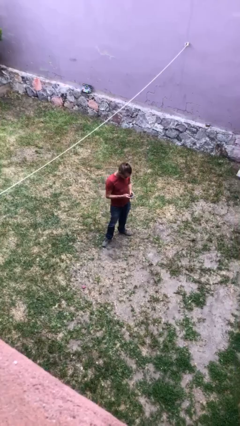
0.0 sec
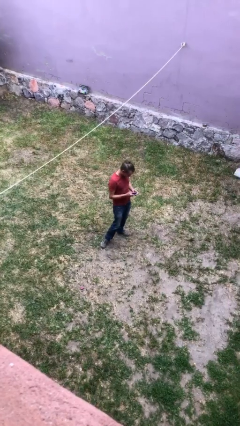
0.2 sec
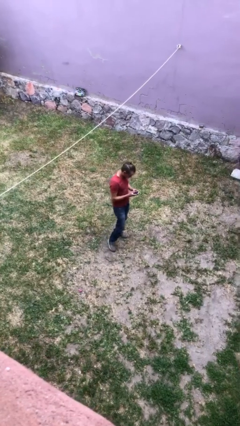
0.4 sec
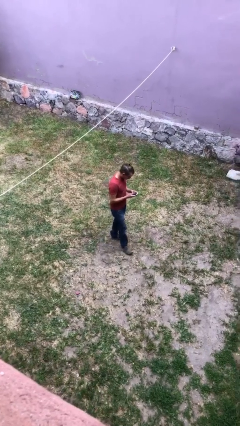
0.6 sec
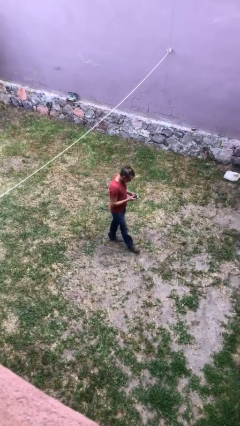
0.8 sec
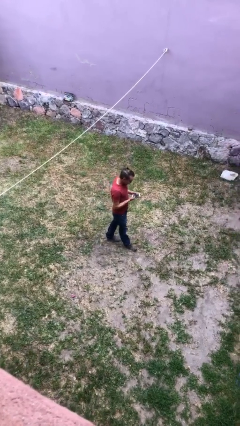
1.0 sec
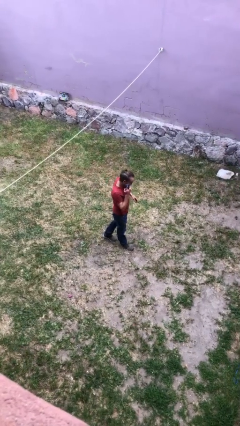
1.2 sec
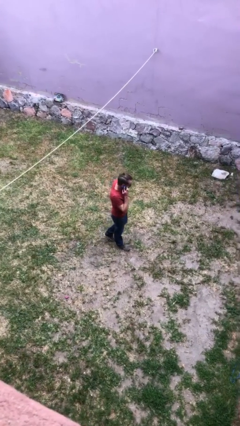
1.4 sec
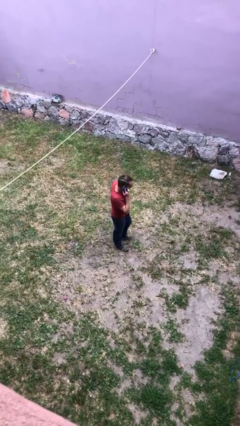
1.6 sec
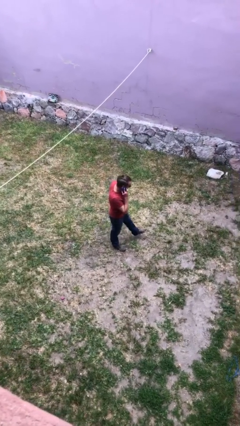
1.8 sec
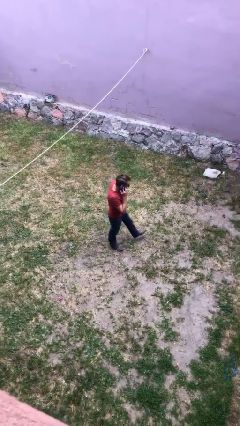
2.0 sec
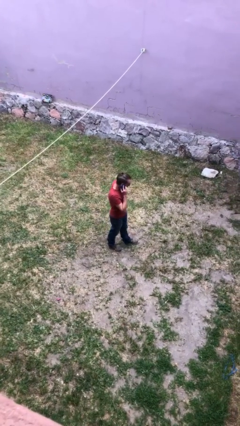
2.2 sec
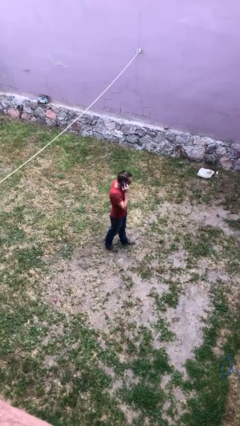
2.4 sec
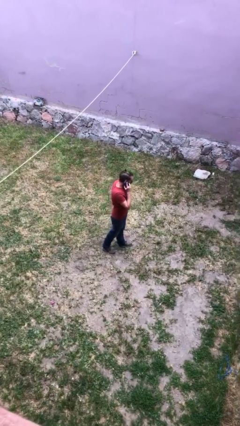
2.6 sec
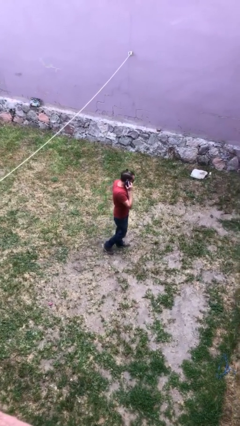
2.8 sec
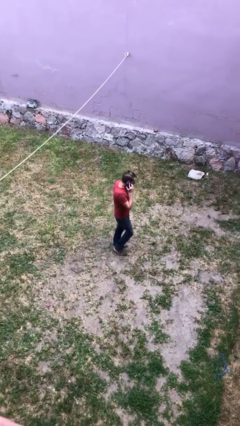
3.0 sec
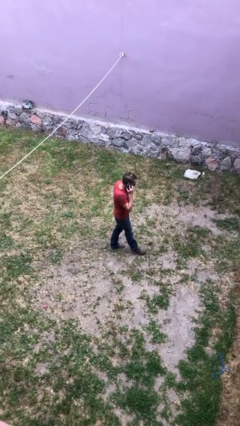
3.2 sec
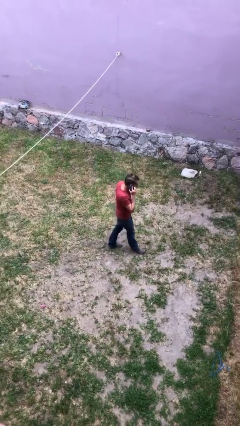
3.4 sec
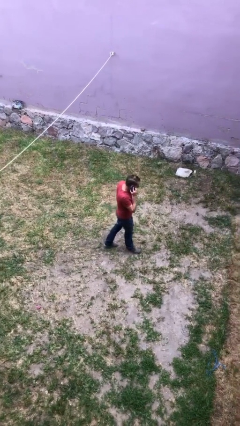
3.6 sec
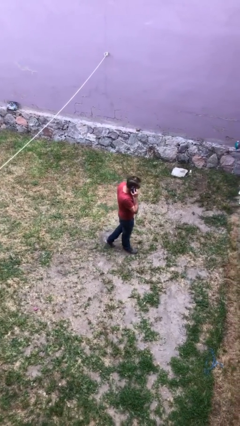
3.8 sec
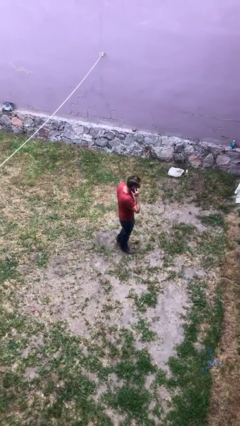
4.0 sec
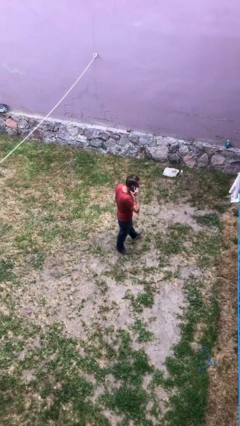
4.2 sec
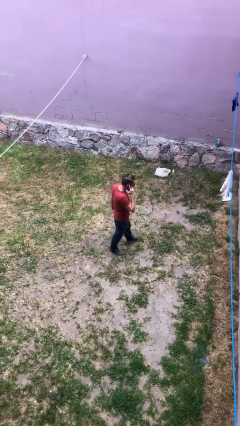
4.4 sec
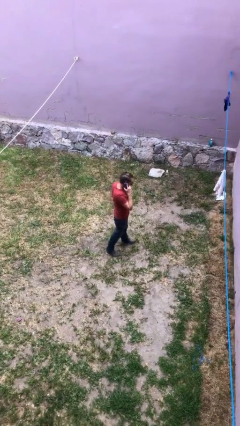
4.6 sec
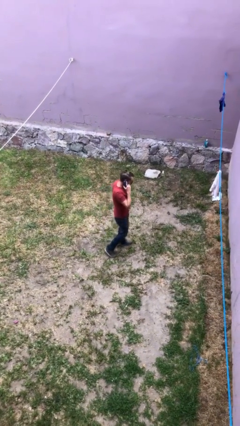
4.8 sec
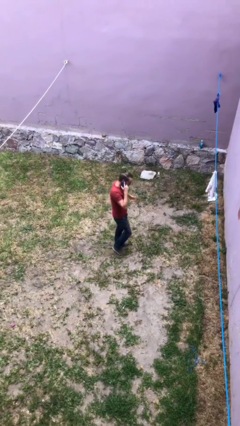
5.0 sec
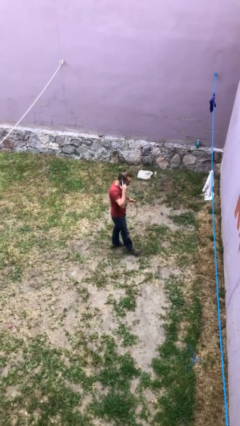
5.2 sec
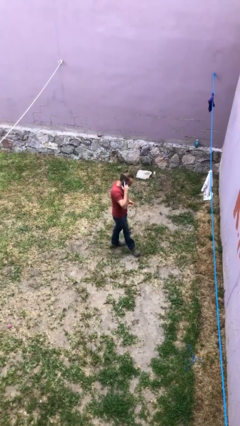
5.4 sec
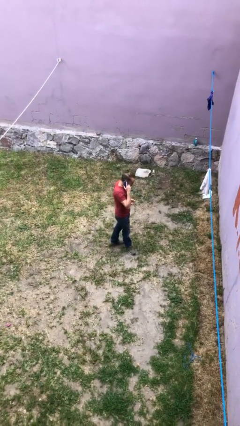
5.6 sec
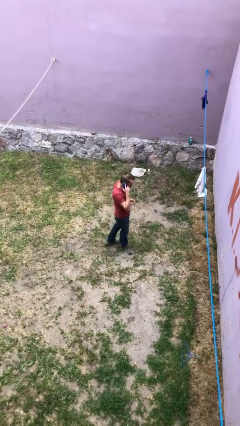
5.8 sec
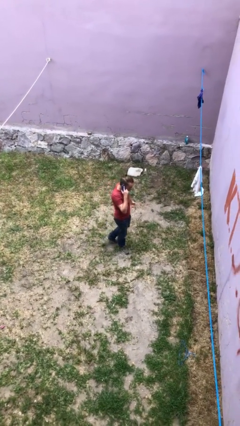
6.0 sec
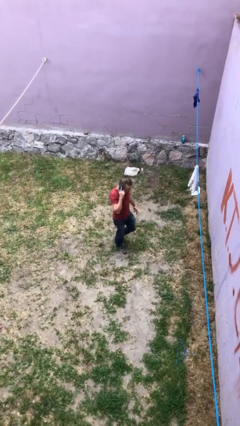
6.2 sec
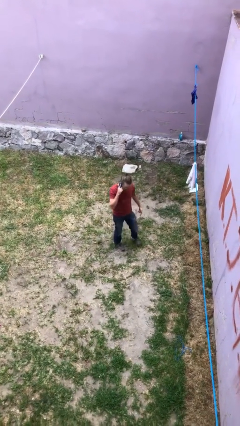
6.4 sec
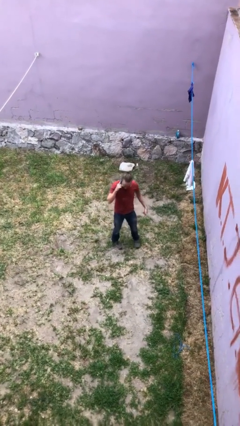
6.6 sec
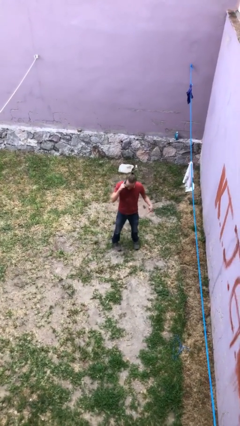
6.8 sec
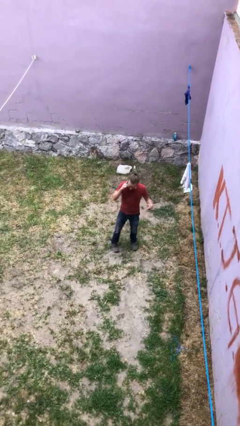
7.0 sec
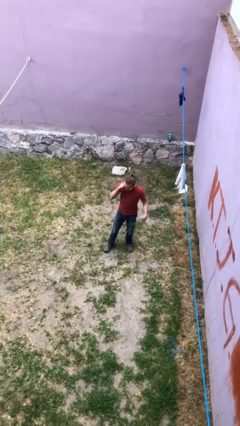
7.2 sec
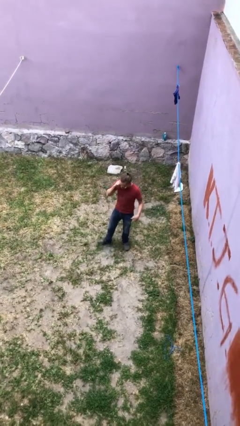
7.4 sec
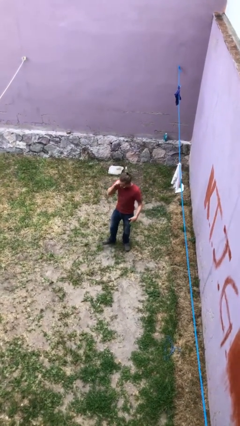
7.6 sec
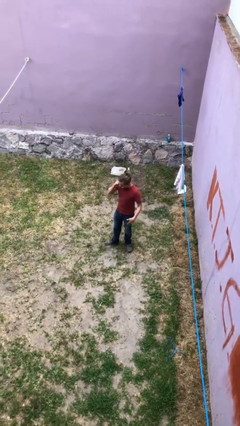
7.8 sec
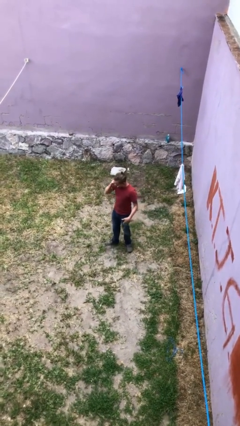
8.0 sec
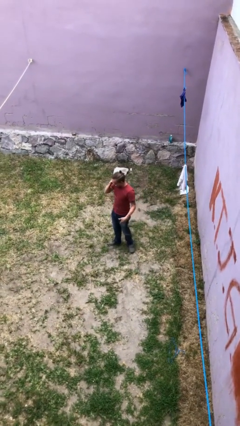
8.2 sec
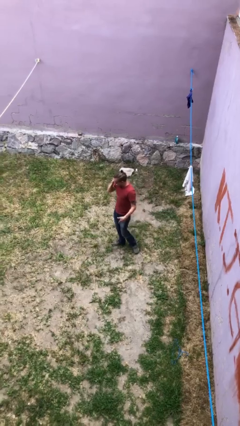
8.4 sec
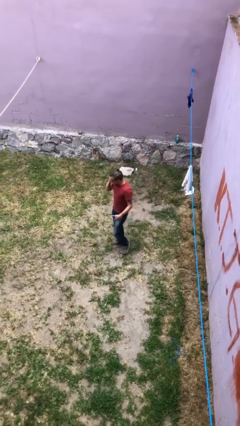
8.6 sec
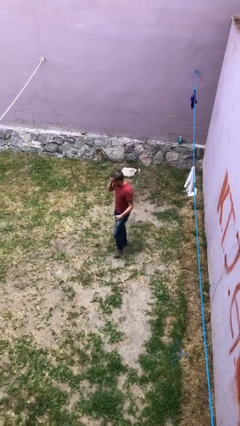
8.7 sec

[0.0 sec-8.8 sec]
person talks on phone

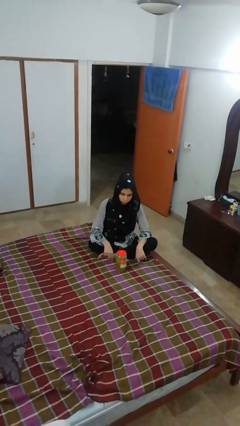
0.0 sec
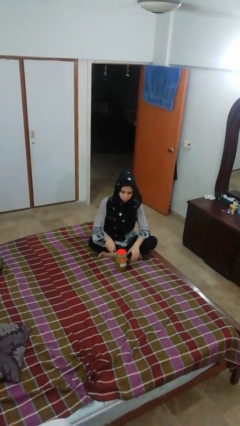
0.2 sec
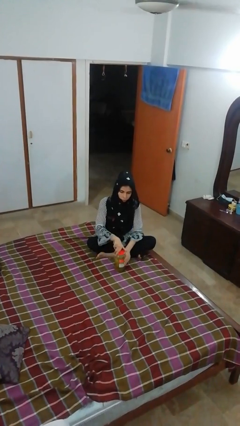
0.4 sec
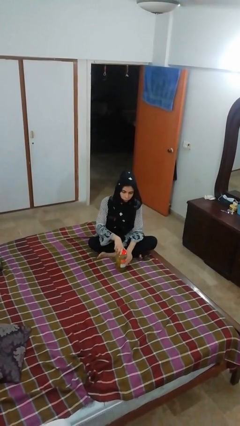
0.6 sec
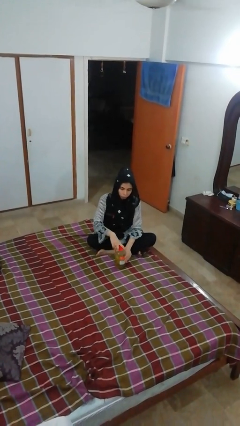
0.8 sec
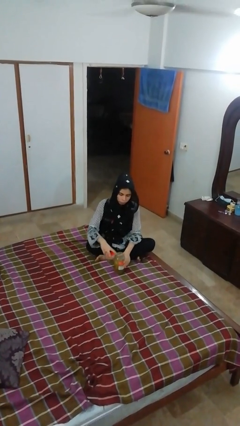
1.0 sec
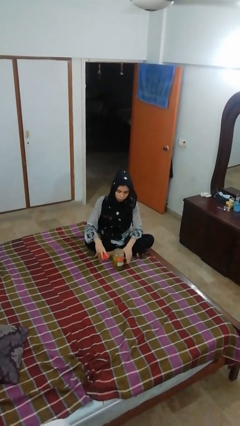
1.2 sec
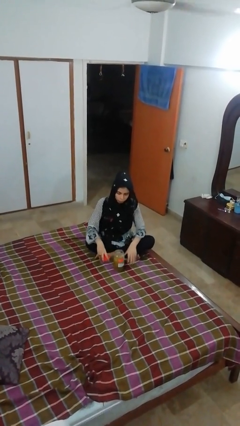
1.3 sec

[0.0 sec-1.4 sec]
person opens jar

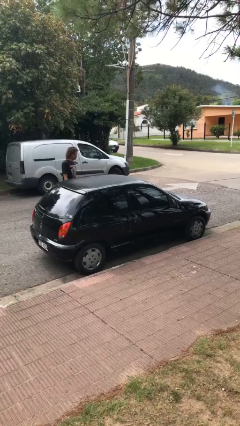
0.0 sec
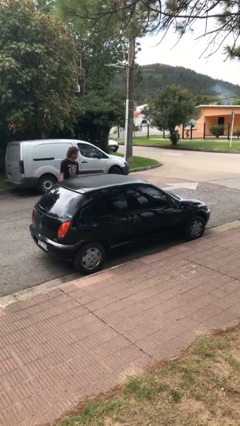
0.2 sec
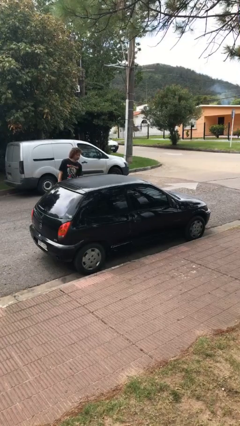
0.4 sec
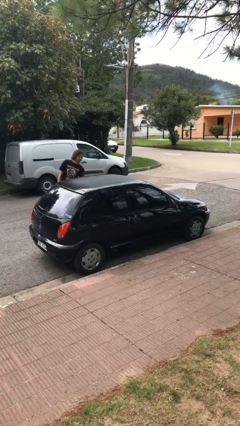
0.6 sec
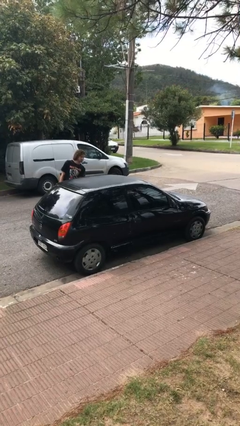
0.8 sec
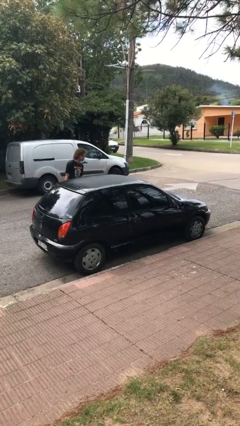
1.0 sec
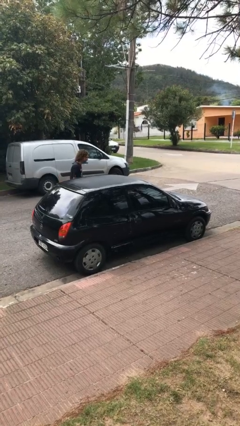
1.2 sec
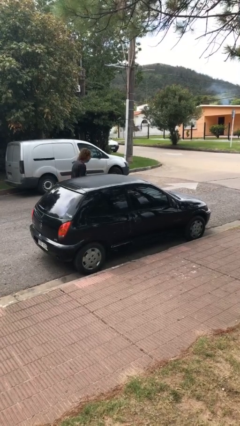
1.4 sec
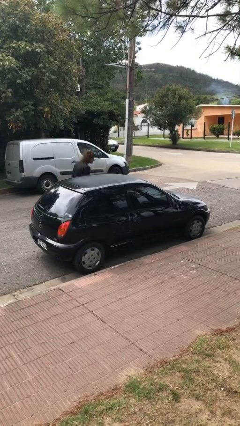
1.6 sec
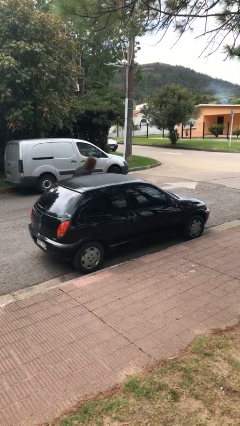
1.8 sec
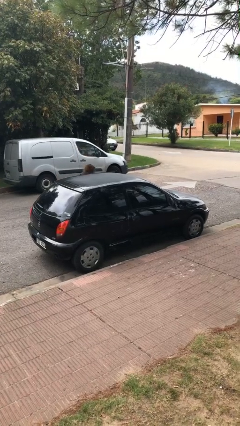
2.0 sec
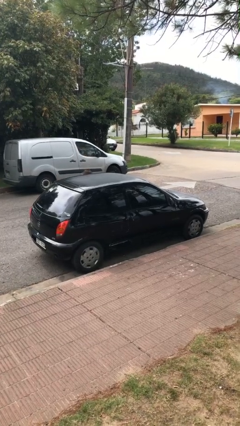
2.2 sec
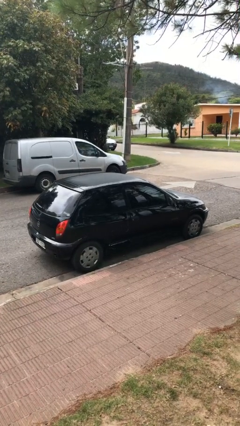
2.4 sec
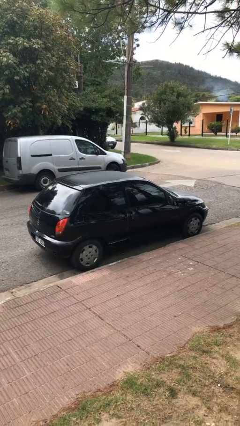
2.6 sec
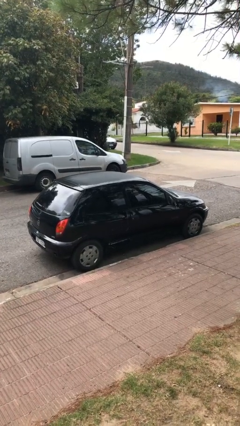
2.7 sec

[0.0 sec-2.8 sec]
car picks up person

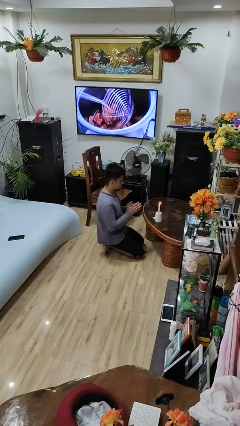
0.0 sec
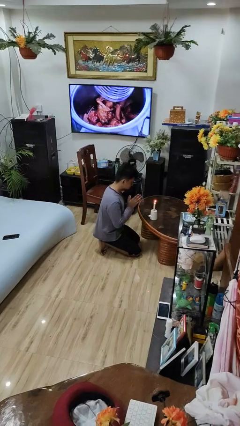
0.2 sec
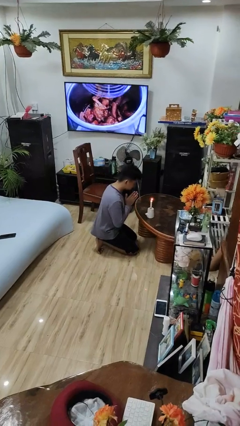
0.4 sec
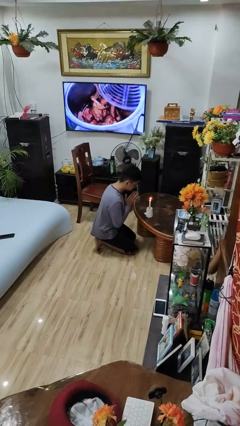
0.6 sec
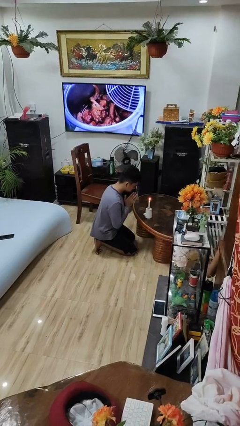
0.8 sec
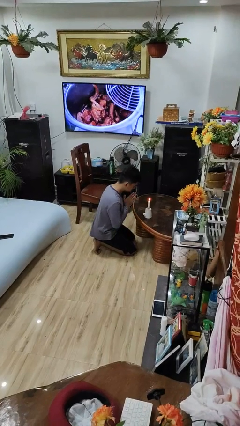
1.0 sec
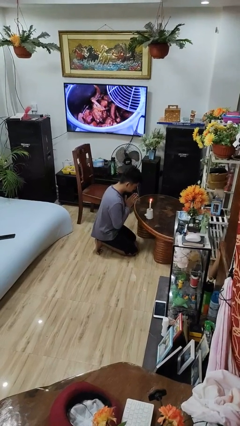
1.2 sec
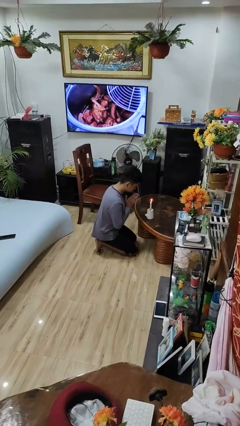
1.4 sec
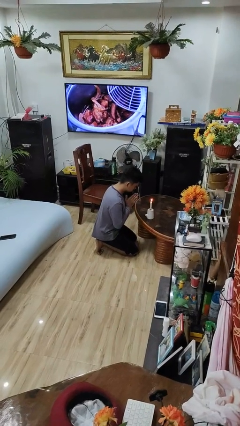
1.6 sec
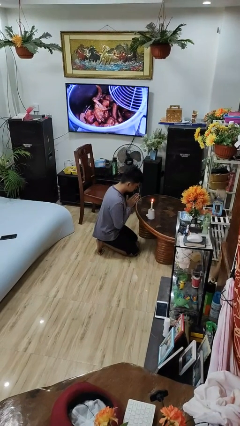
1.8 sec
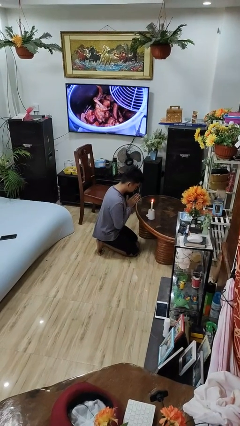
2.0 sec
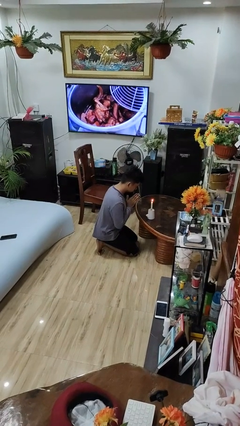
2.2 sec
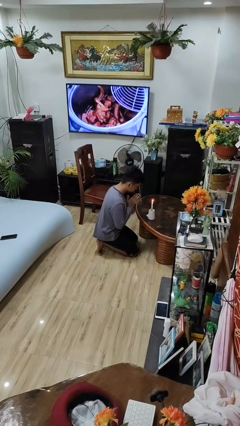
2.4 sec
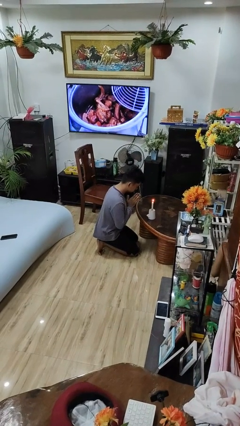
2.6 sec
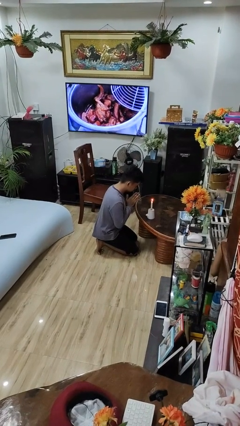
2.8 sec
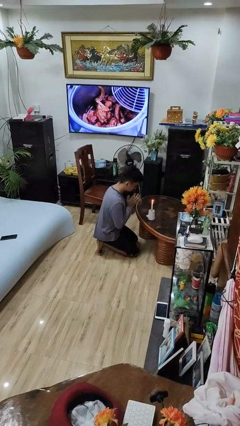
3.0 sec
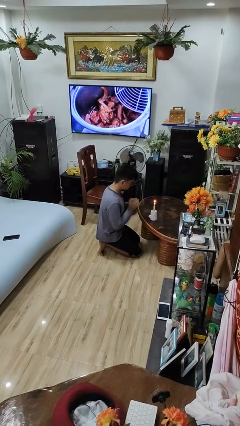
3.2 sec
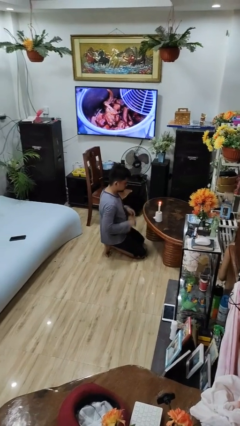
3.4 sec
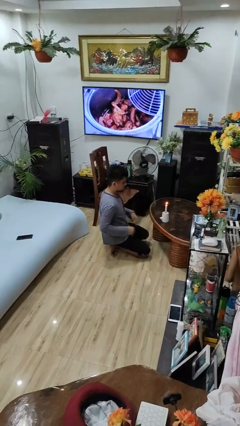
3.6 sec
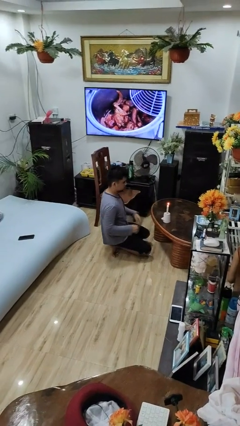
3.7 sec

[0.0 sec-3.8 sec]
person prays

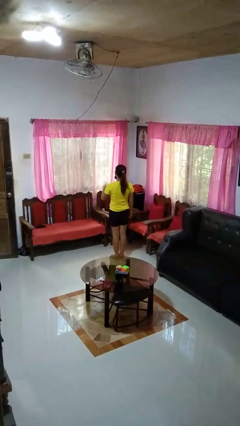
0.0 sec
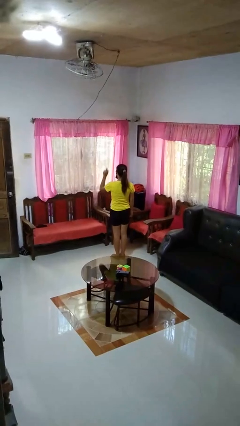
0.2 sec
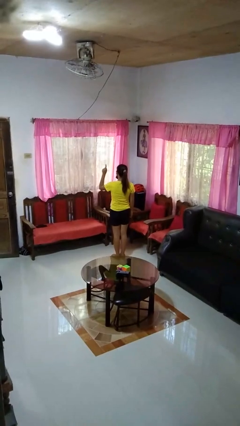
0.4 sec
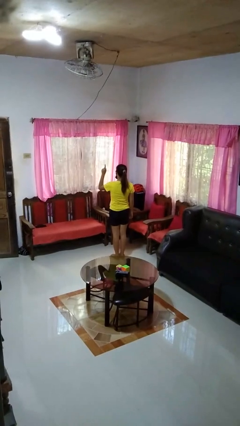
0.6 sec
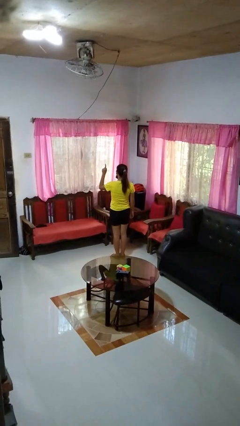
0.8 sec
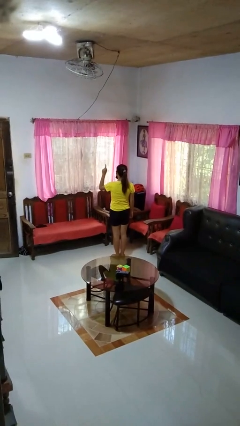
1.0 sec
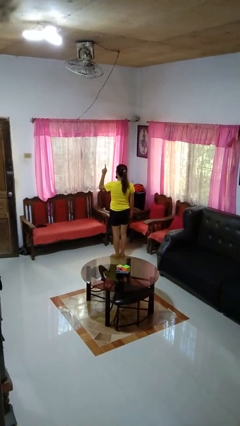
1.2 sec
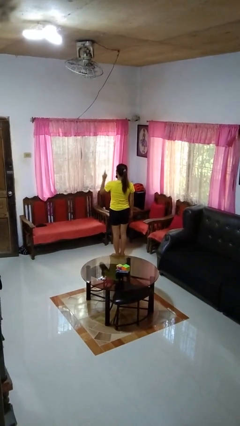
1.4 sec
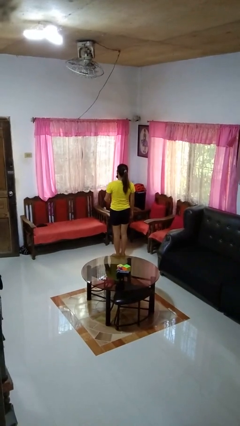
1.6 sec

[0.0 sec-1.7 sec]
person gestures number one
